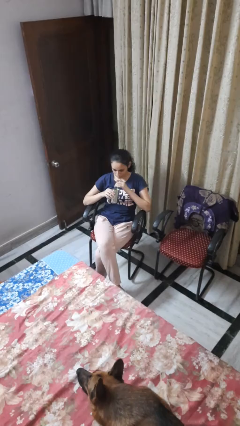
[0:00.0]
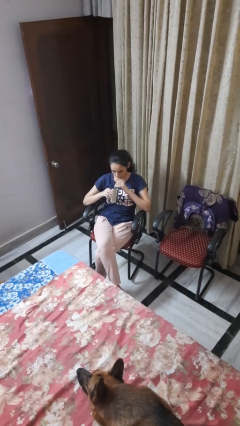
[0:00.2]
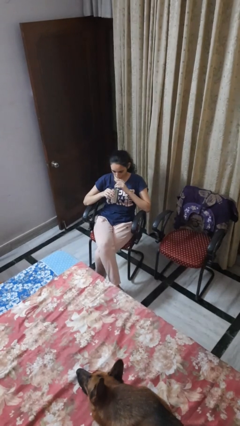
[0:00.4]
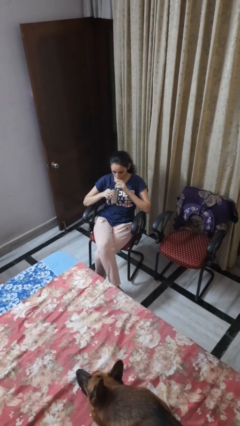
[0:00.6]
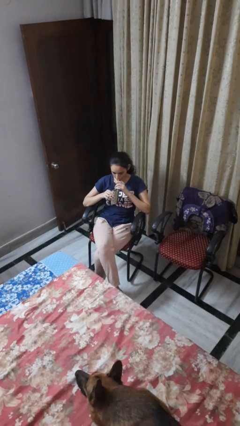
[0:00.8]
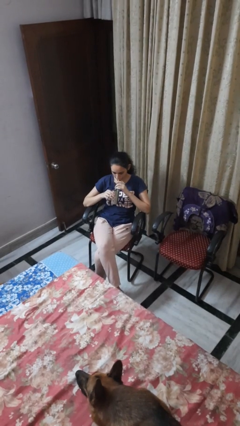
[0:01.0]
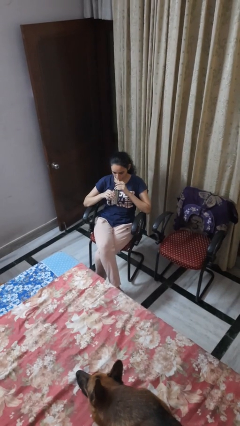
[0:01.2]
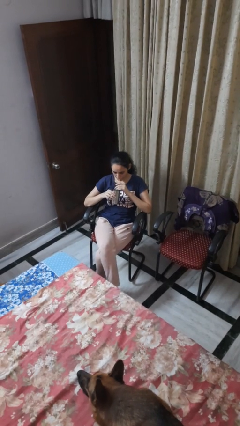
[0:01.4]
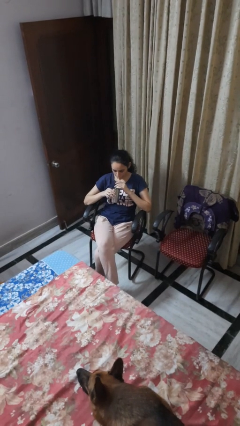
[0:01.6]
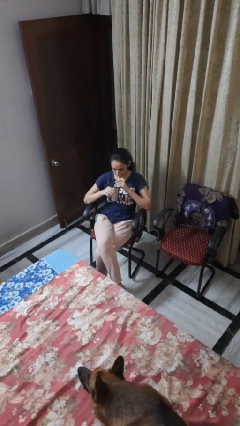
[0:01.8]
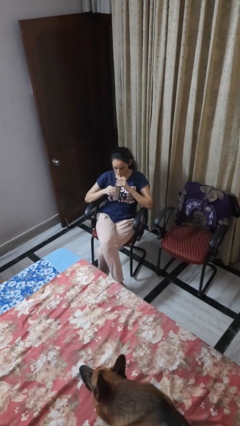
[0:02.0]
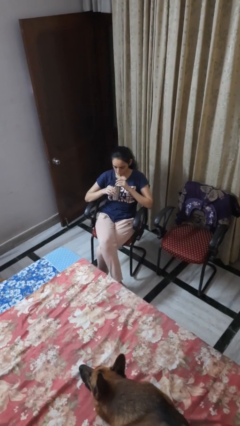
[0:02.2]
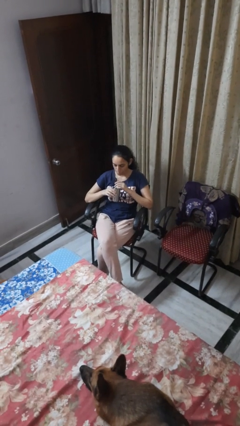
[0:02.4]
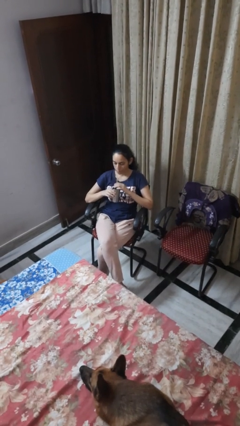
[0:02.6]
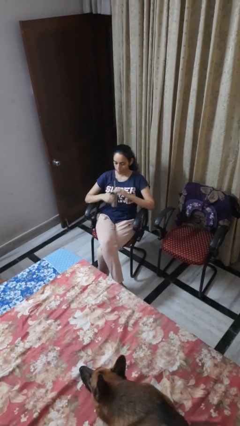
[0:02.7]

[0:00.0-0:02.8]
person drinks from straw

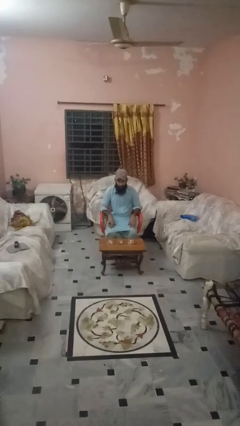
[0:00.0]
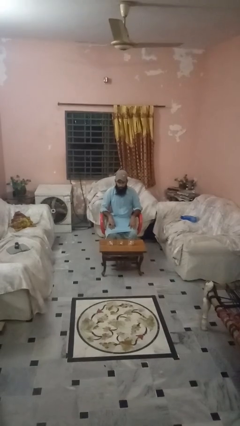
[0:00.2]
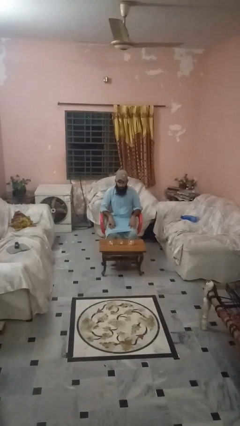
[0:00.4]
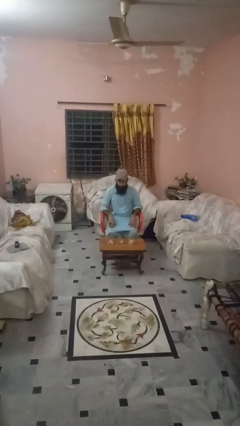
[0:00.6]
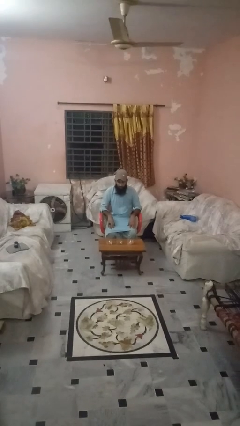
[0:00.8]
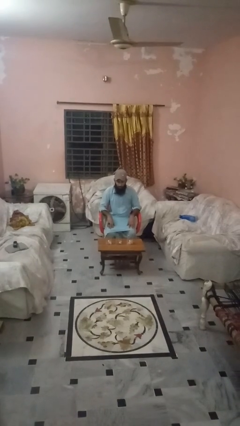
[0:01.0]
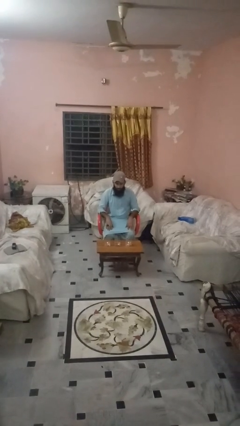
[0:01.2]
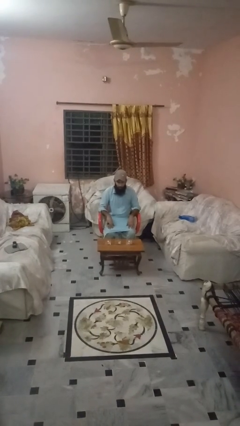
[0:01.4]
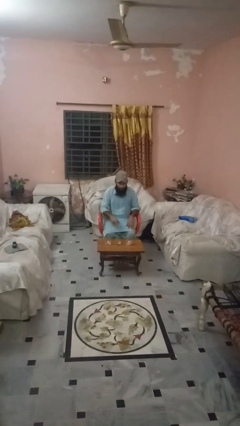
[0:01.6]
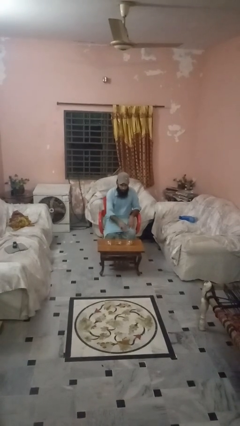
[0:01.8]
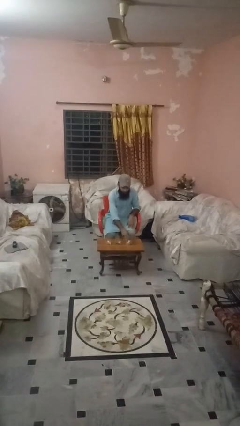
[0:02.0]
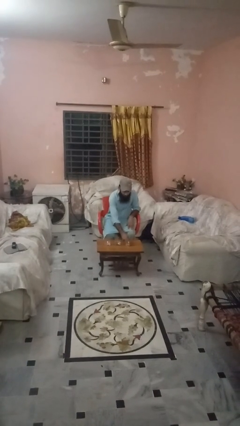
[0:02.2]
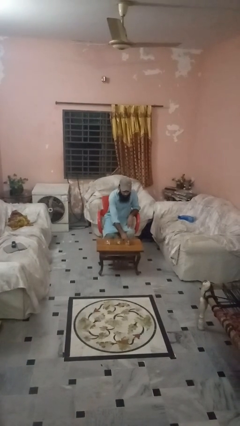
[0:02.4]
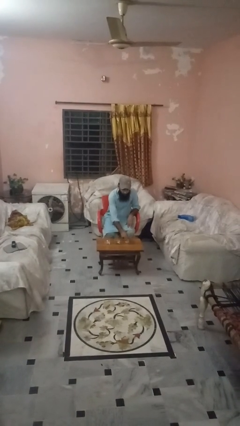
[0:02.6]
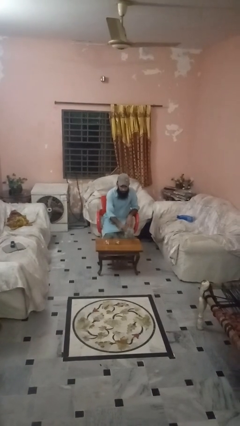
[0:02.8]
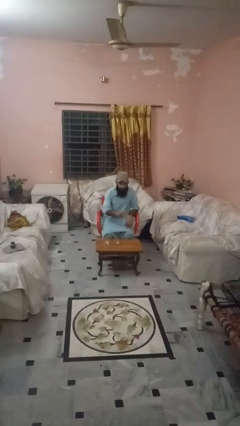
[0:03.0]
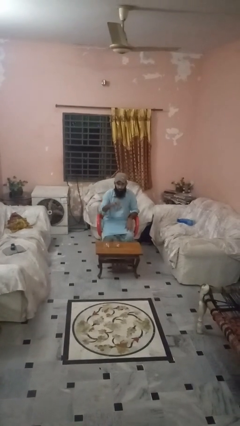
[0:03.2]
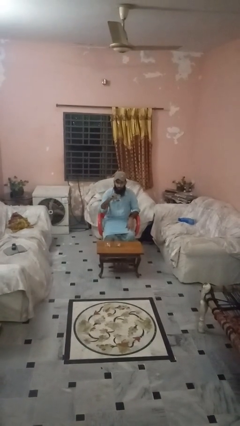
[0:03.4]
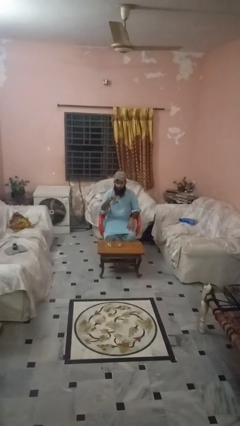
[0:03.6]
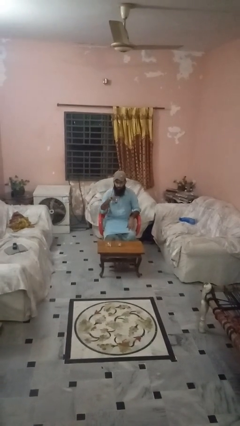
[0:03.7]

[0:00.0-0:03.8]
person picks up object from table

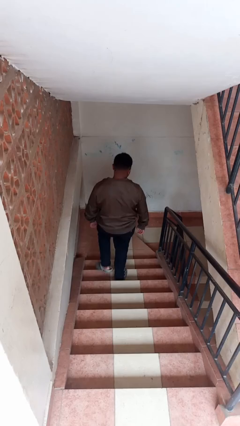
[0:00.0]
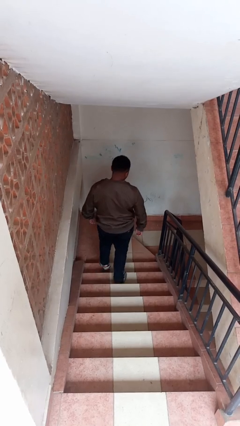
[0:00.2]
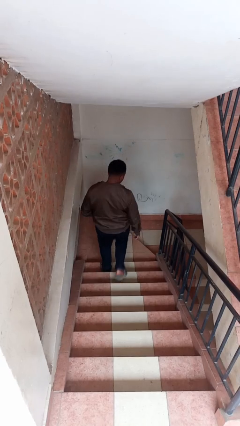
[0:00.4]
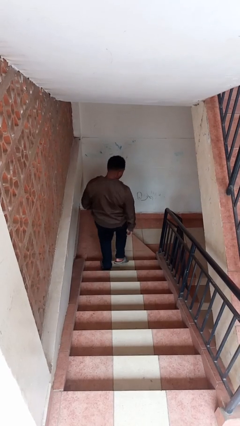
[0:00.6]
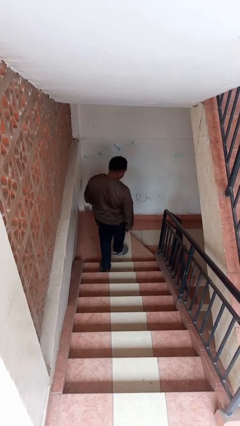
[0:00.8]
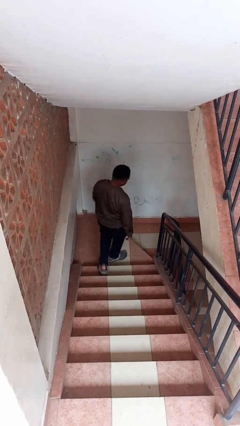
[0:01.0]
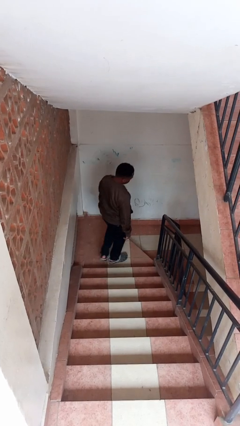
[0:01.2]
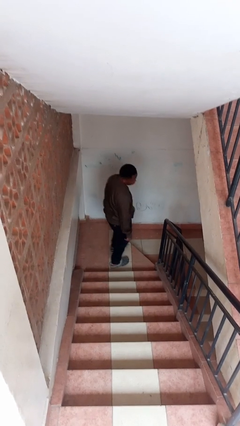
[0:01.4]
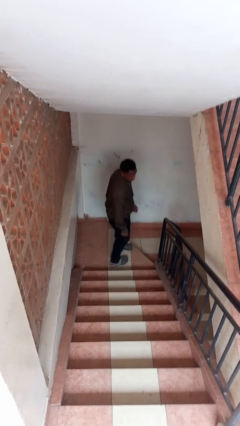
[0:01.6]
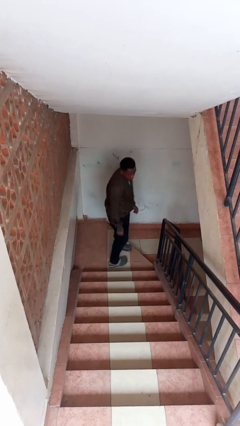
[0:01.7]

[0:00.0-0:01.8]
person climbs down stairs

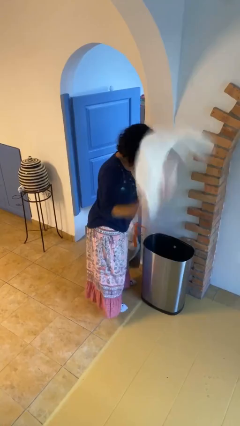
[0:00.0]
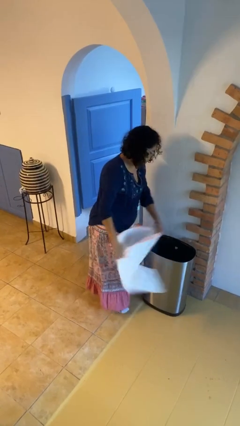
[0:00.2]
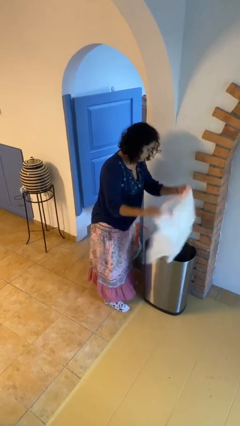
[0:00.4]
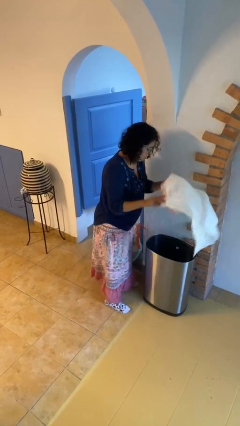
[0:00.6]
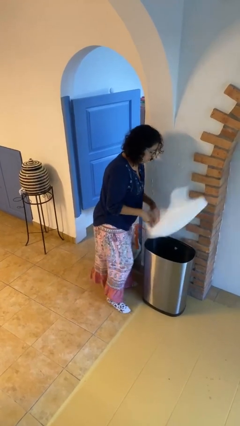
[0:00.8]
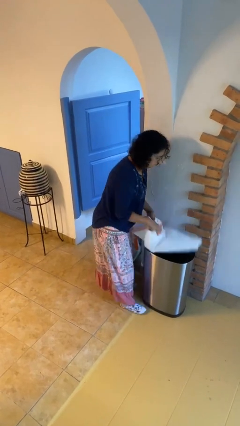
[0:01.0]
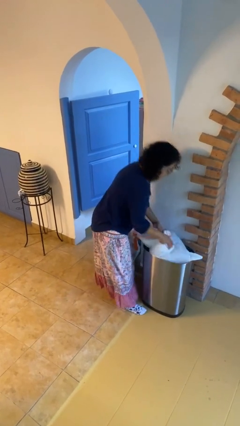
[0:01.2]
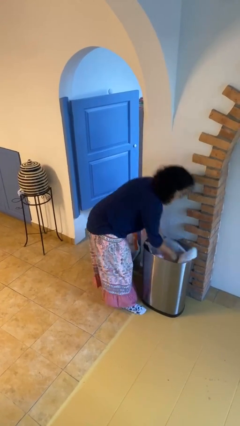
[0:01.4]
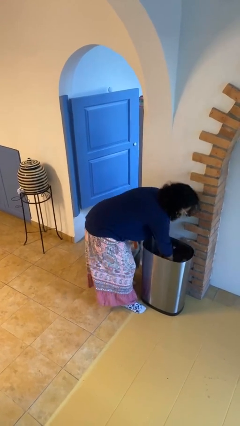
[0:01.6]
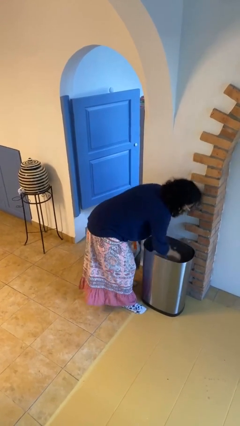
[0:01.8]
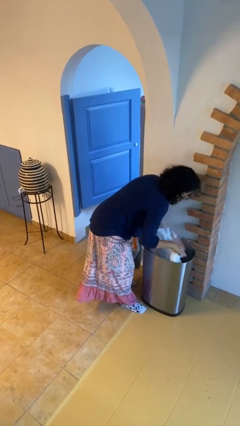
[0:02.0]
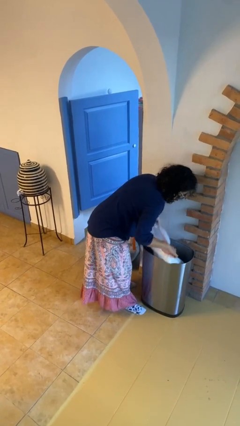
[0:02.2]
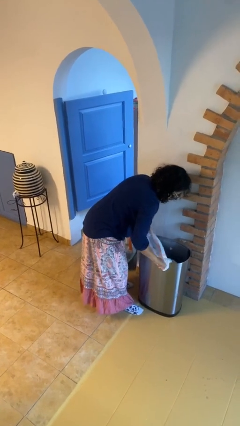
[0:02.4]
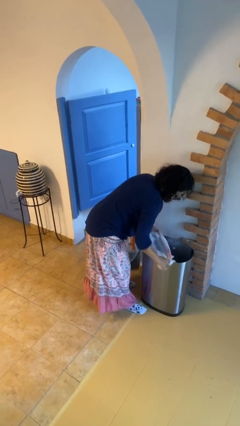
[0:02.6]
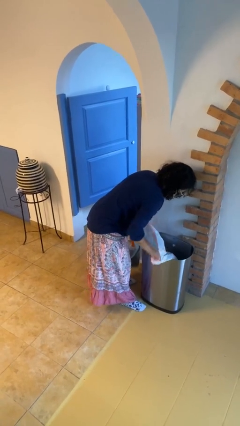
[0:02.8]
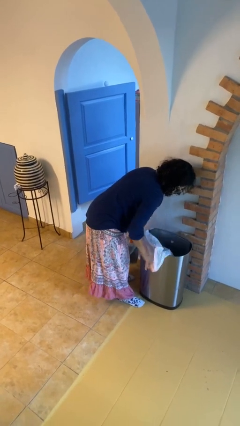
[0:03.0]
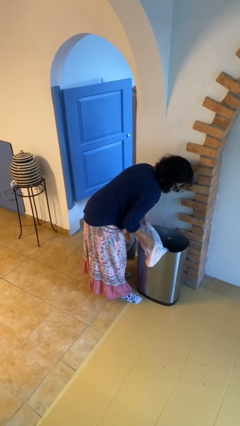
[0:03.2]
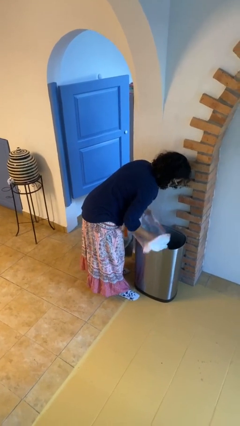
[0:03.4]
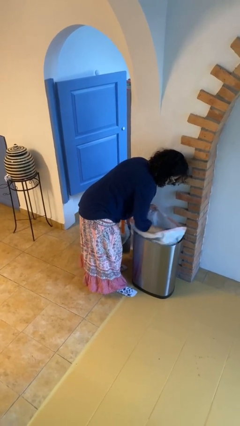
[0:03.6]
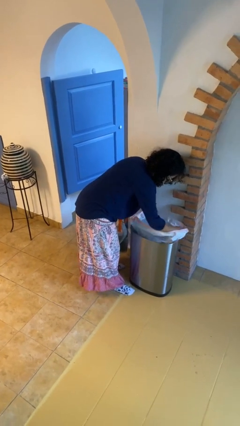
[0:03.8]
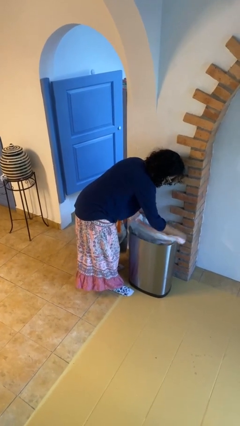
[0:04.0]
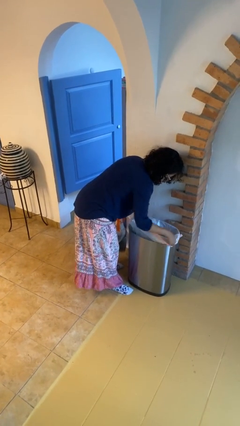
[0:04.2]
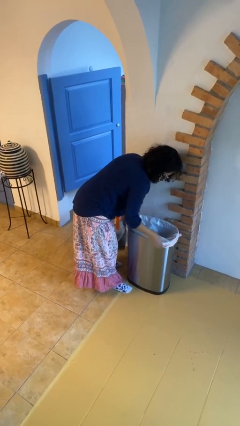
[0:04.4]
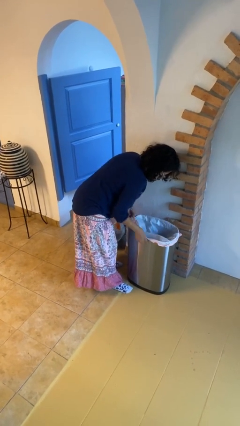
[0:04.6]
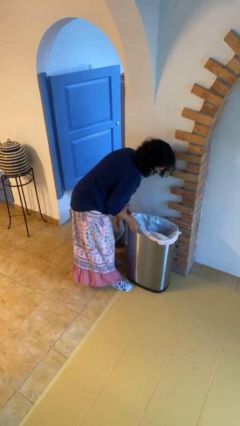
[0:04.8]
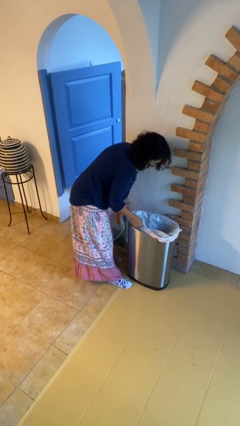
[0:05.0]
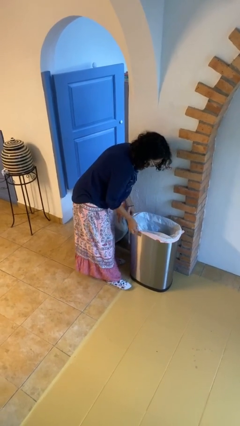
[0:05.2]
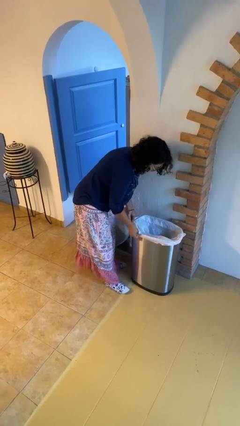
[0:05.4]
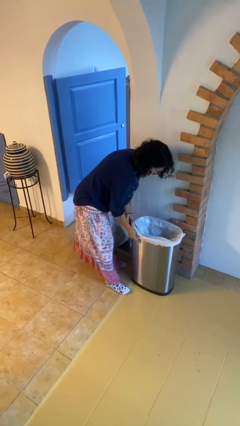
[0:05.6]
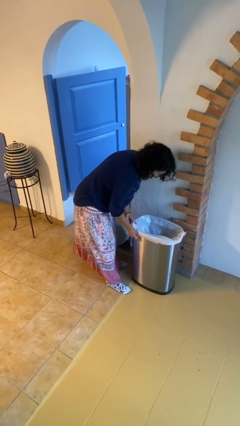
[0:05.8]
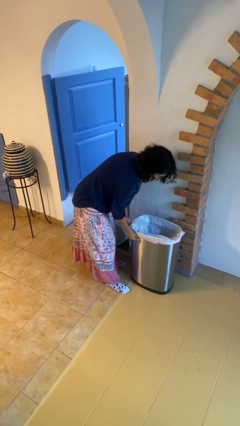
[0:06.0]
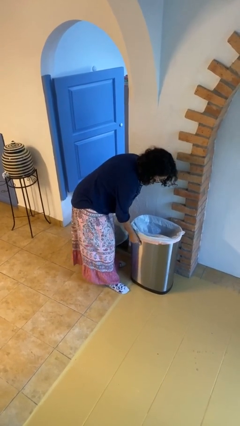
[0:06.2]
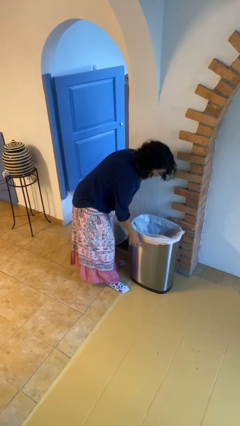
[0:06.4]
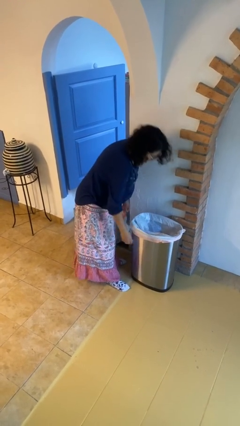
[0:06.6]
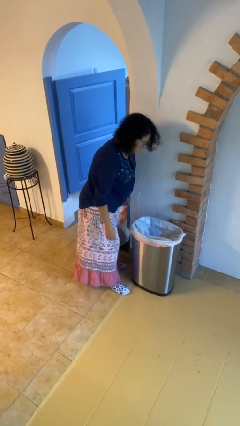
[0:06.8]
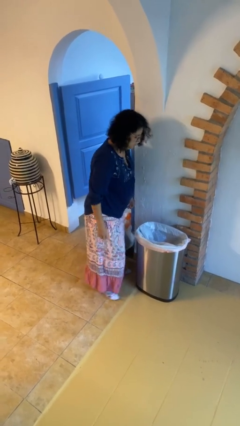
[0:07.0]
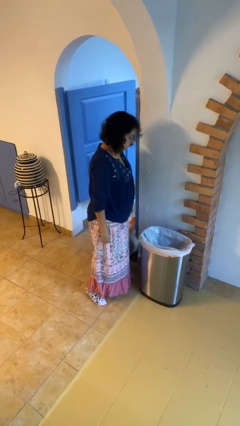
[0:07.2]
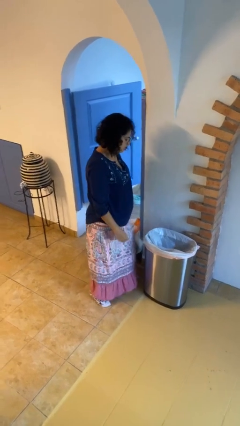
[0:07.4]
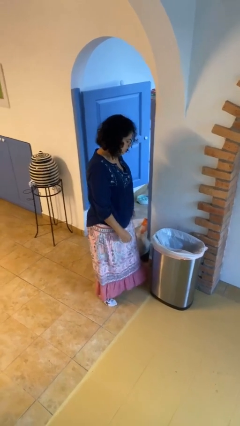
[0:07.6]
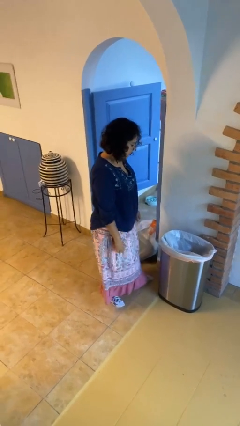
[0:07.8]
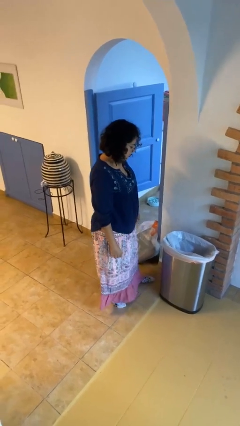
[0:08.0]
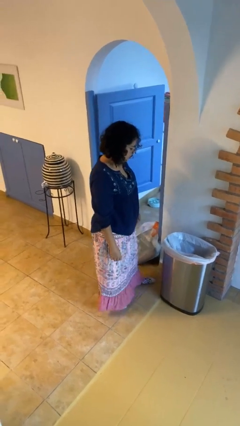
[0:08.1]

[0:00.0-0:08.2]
person inserts trashbag into trashcan

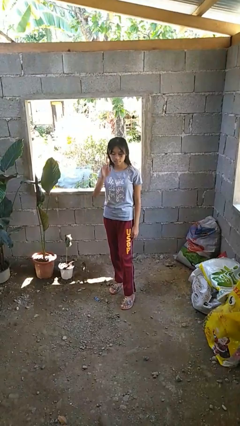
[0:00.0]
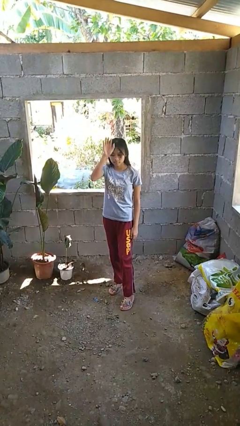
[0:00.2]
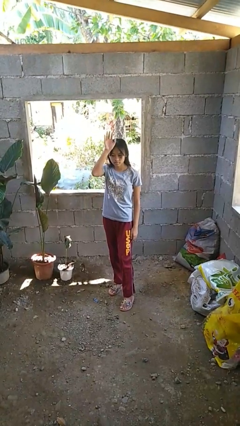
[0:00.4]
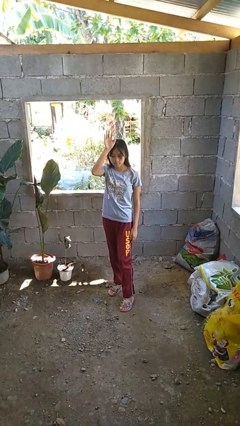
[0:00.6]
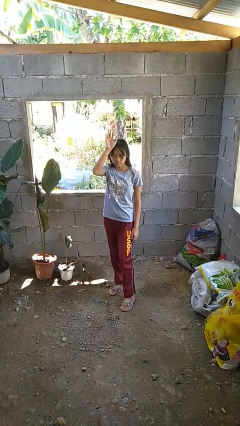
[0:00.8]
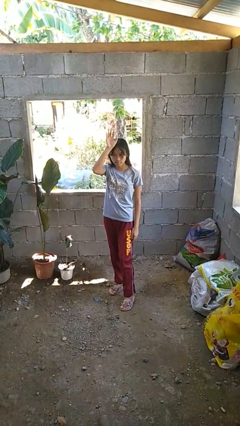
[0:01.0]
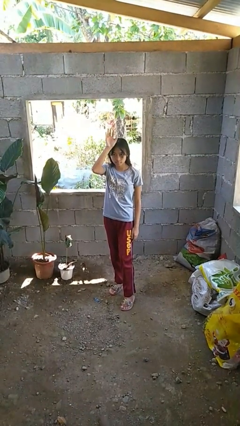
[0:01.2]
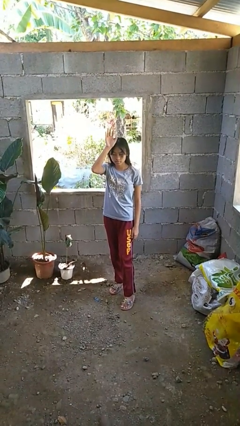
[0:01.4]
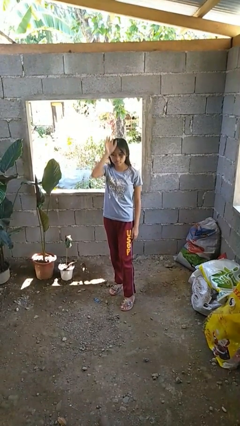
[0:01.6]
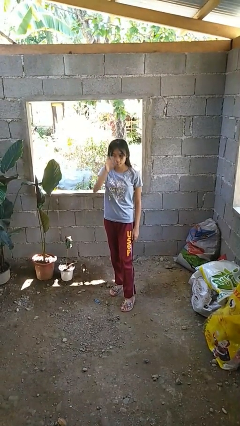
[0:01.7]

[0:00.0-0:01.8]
person gestures raise hand
